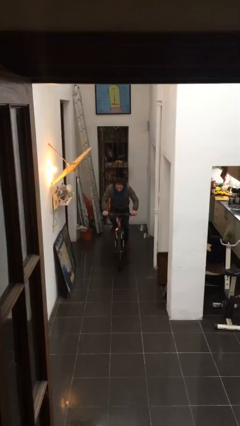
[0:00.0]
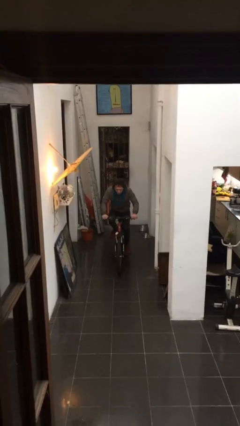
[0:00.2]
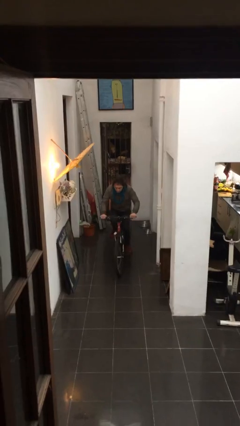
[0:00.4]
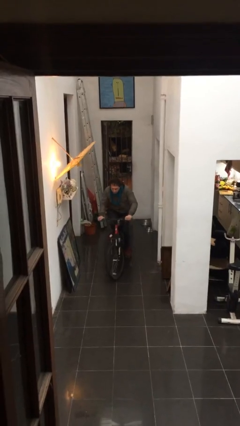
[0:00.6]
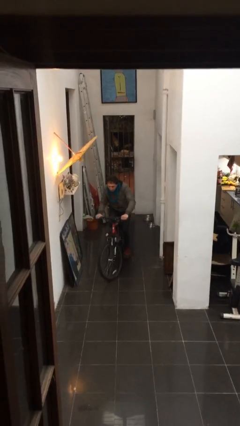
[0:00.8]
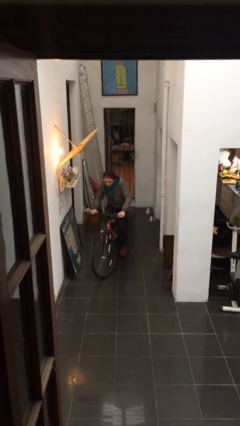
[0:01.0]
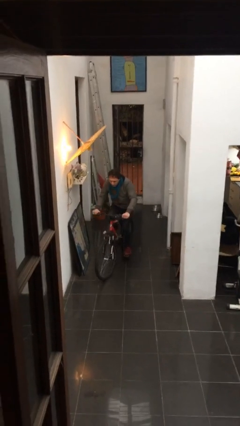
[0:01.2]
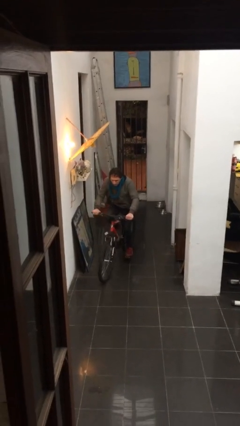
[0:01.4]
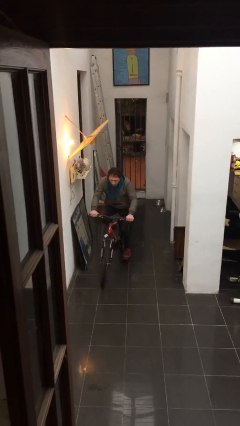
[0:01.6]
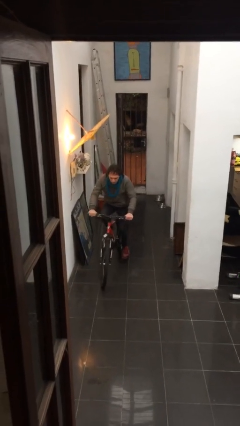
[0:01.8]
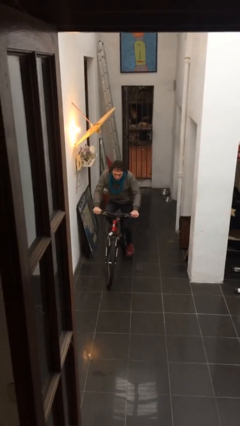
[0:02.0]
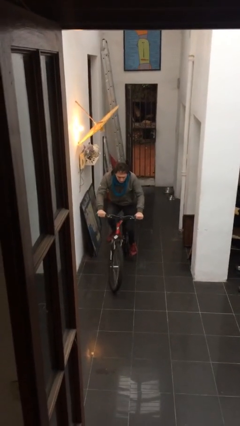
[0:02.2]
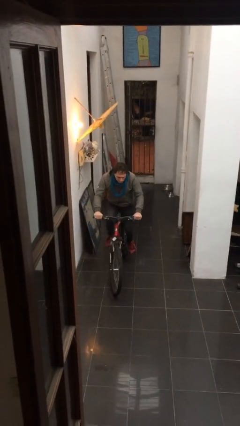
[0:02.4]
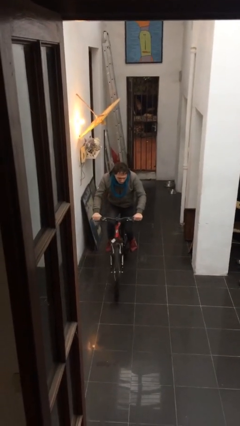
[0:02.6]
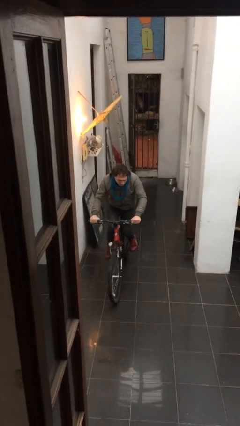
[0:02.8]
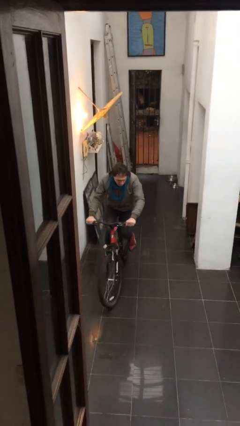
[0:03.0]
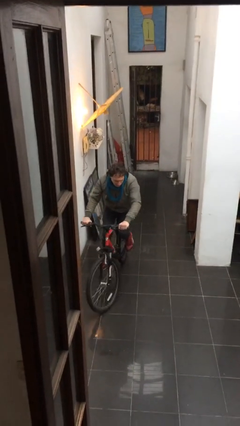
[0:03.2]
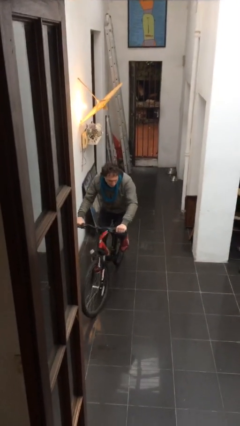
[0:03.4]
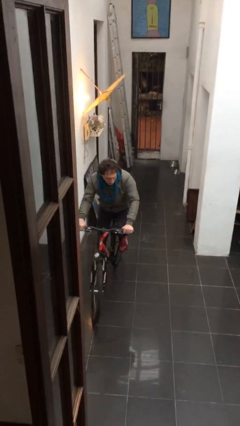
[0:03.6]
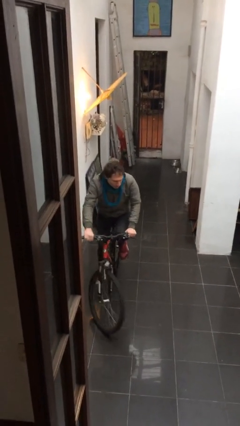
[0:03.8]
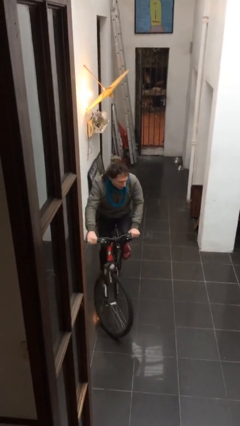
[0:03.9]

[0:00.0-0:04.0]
person rides bicycle

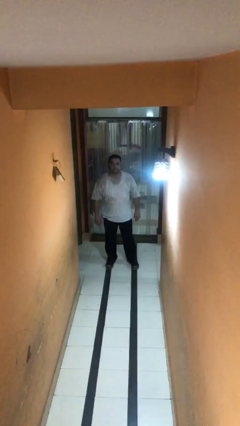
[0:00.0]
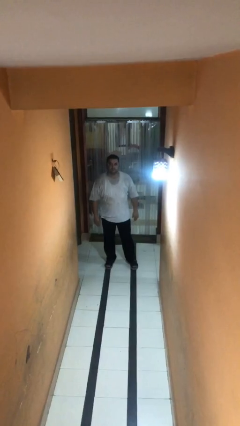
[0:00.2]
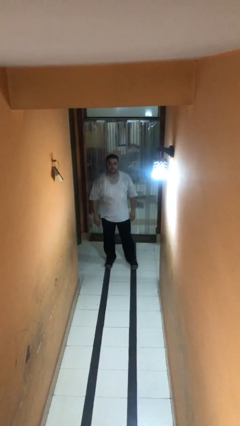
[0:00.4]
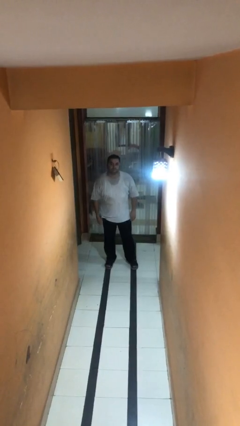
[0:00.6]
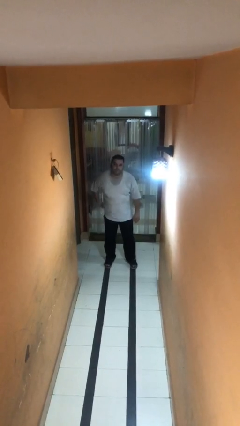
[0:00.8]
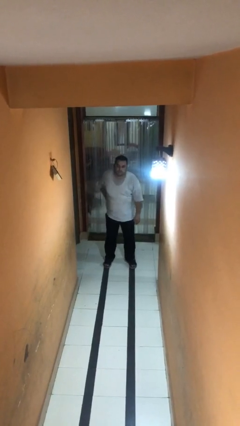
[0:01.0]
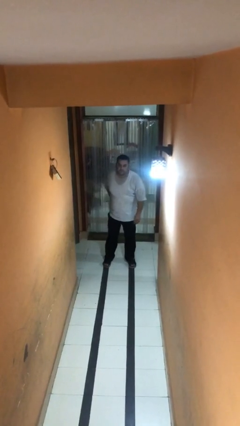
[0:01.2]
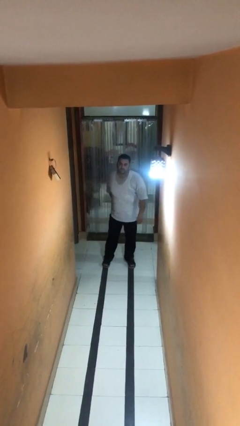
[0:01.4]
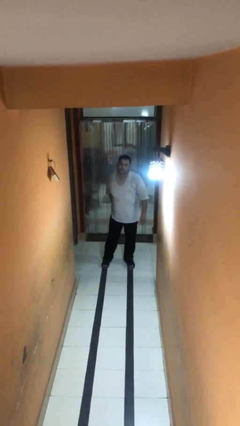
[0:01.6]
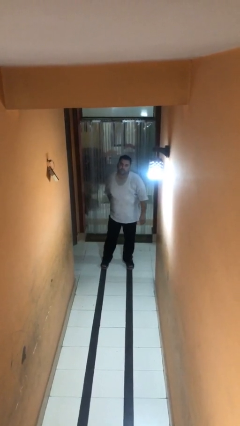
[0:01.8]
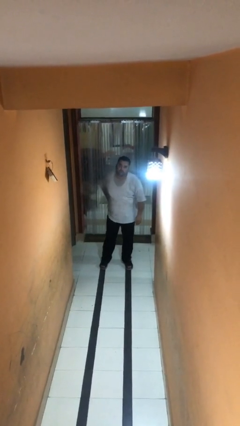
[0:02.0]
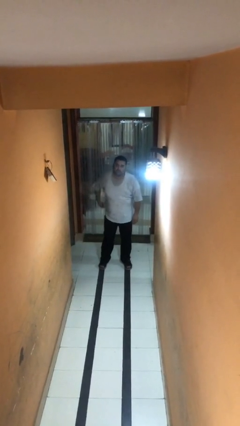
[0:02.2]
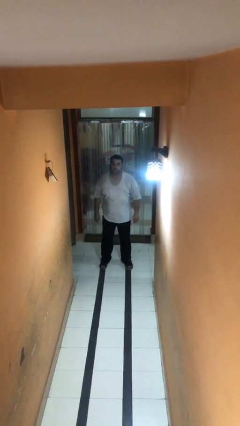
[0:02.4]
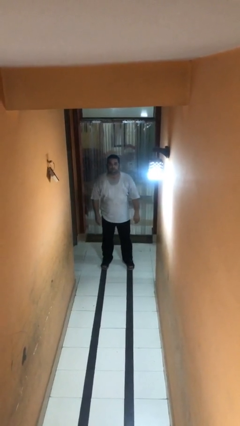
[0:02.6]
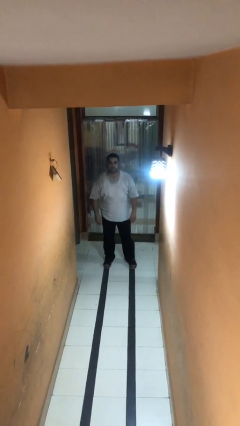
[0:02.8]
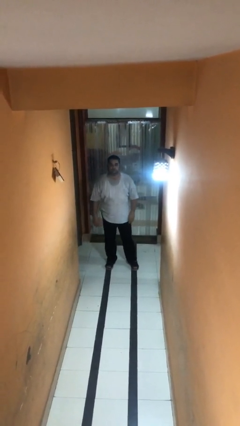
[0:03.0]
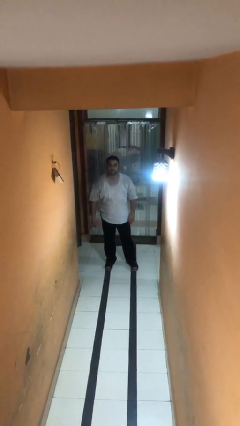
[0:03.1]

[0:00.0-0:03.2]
person puts hands in back pockets

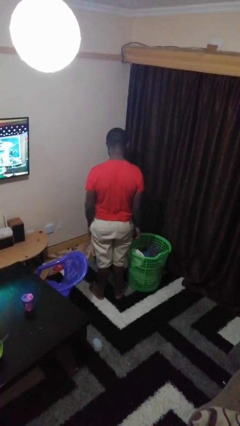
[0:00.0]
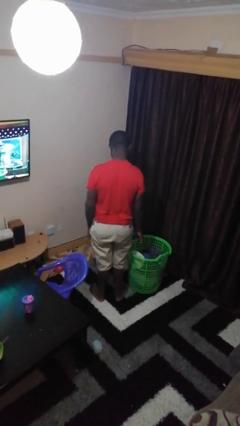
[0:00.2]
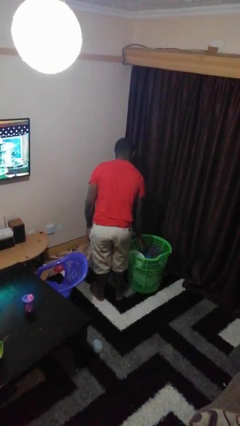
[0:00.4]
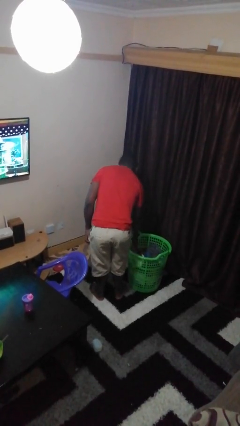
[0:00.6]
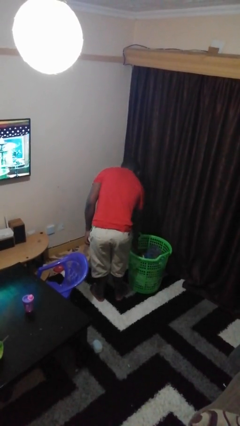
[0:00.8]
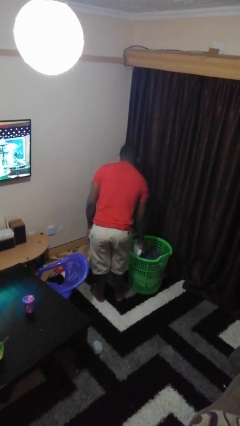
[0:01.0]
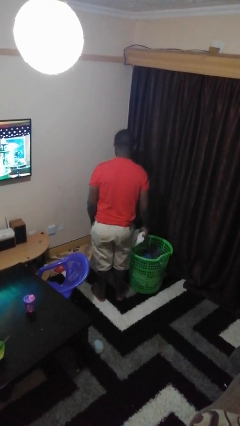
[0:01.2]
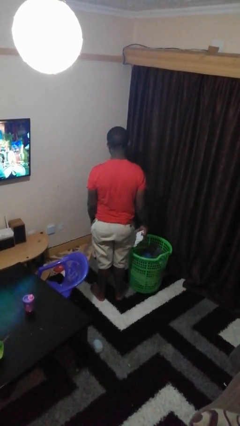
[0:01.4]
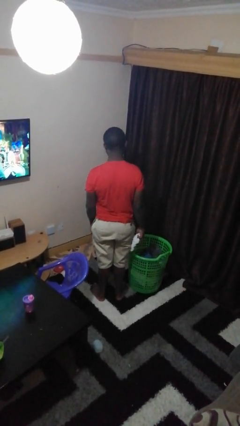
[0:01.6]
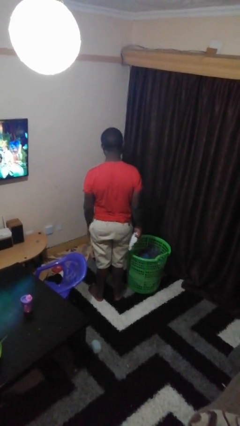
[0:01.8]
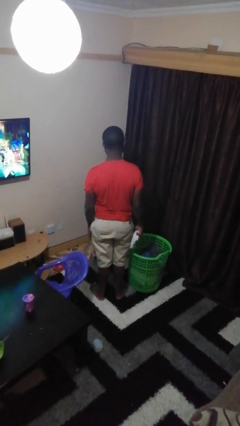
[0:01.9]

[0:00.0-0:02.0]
person takes object from basket

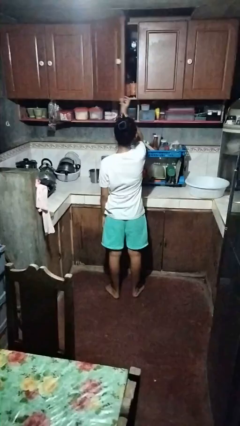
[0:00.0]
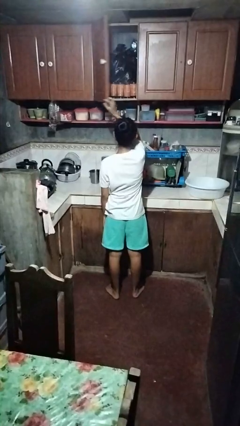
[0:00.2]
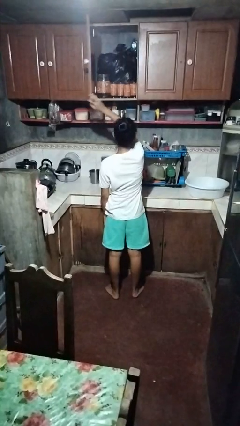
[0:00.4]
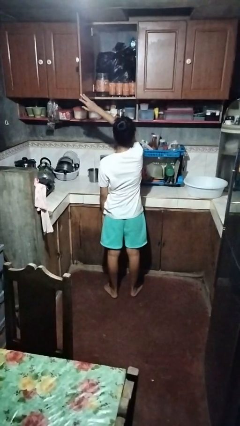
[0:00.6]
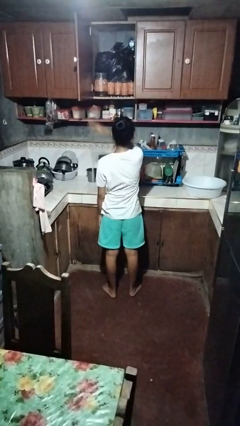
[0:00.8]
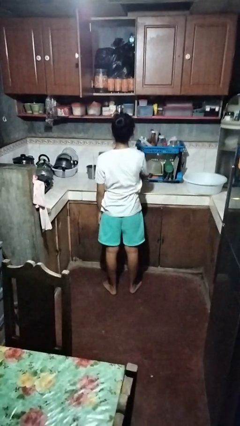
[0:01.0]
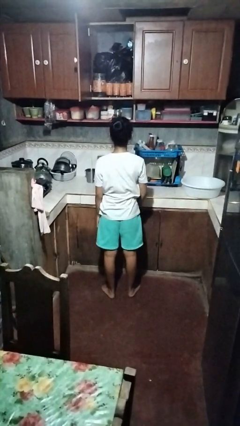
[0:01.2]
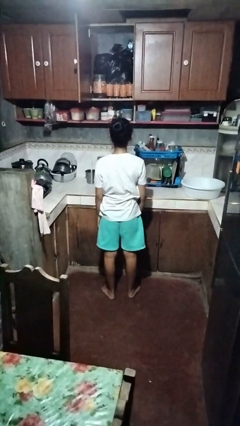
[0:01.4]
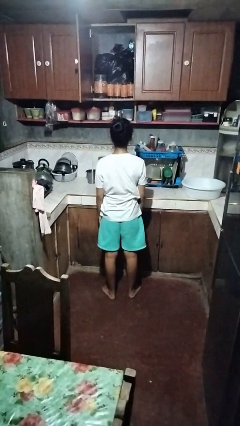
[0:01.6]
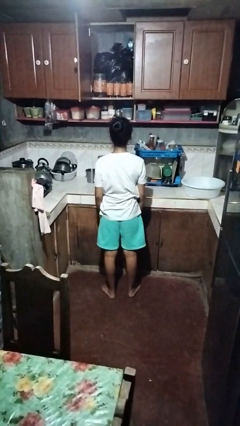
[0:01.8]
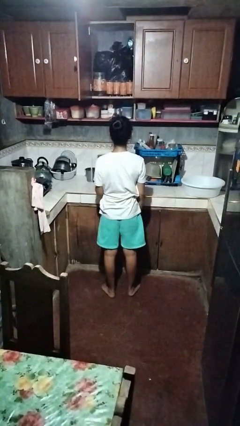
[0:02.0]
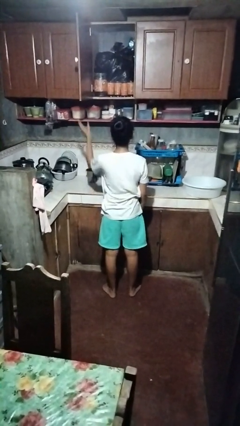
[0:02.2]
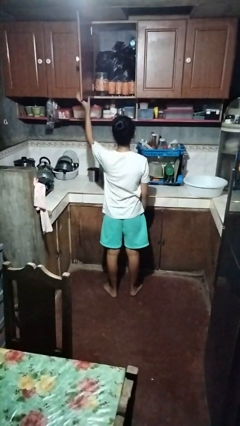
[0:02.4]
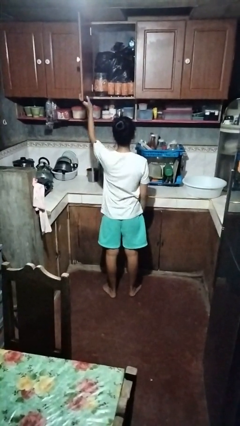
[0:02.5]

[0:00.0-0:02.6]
person opens cabinet

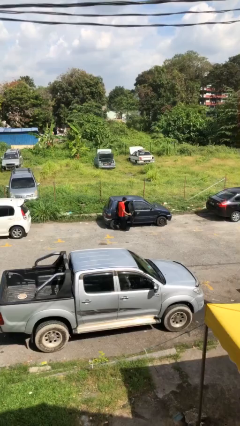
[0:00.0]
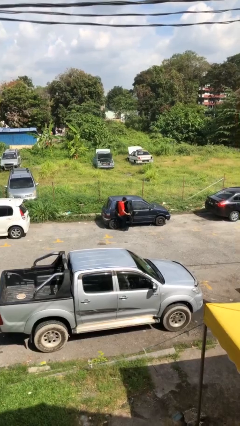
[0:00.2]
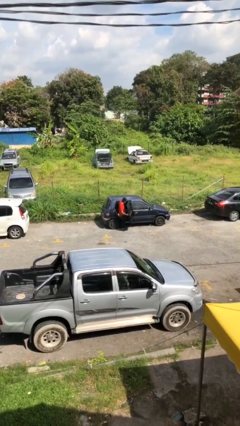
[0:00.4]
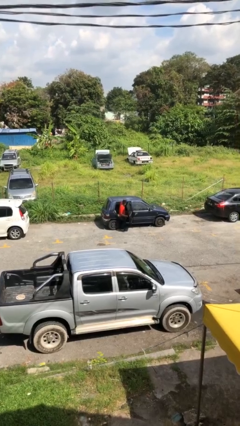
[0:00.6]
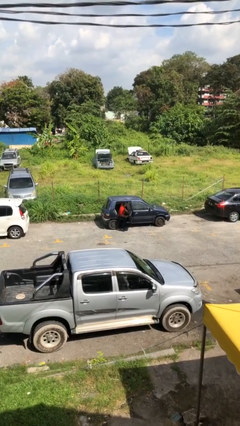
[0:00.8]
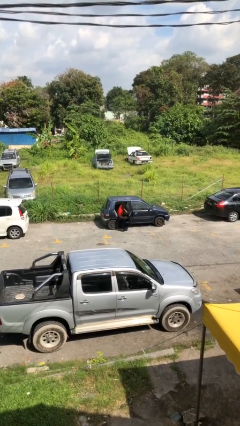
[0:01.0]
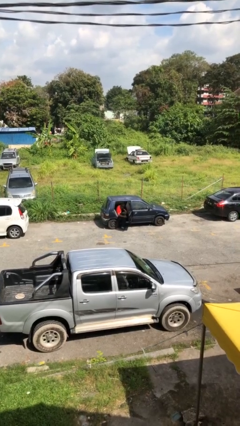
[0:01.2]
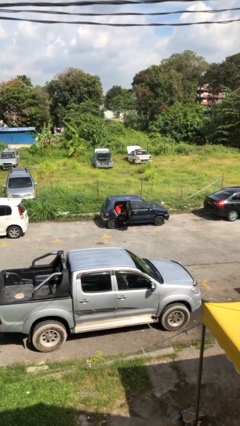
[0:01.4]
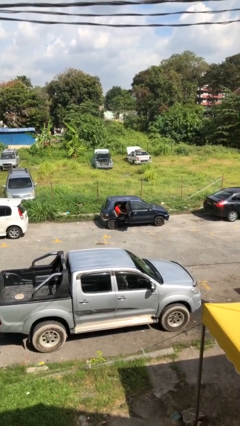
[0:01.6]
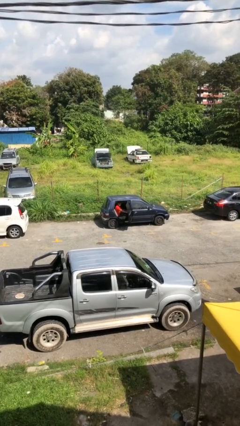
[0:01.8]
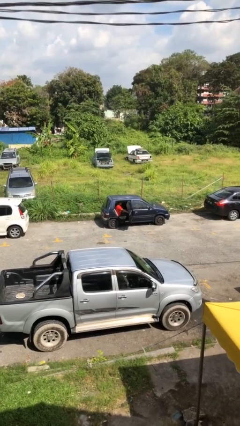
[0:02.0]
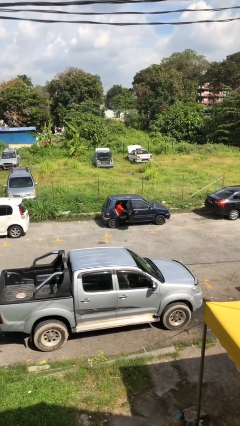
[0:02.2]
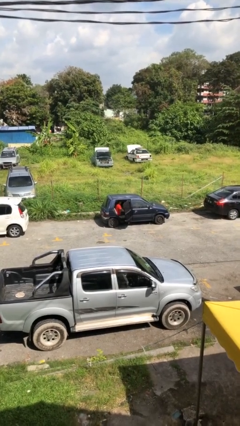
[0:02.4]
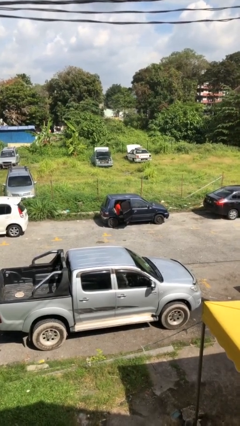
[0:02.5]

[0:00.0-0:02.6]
person enters car

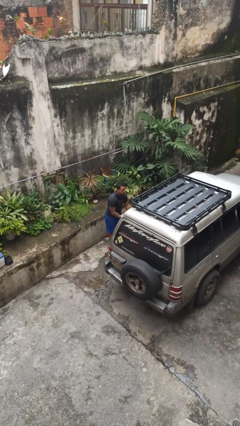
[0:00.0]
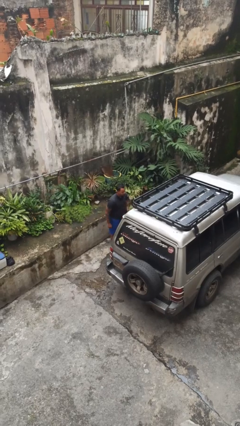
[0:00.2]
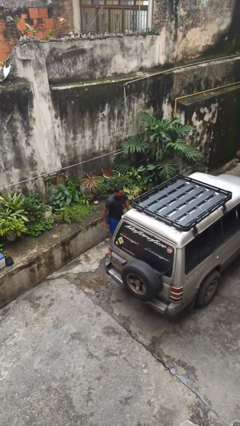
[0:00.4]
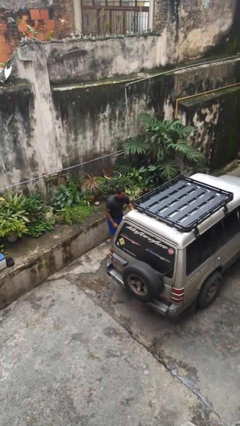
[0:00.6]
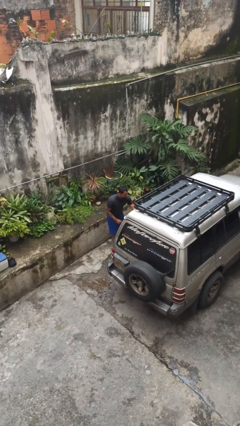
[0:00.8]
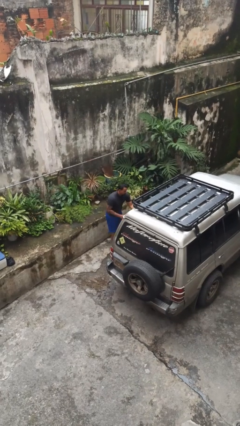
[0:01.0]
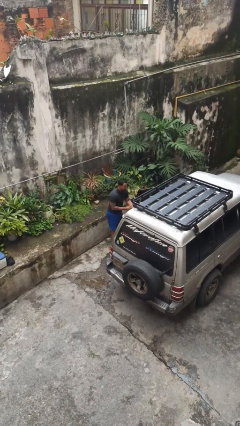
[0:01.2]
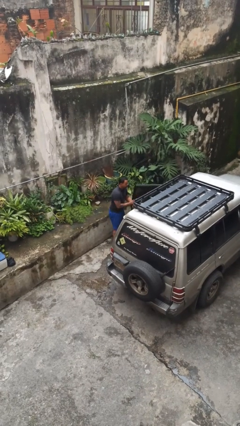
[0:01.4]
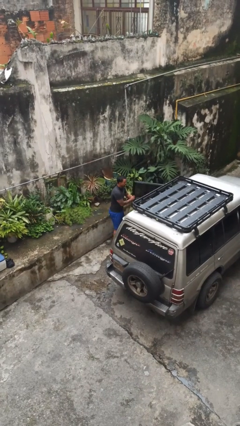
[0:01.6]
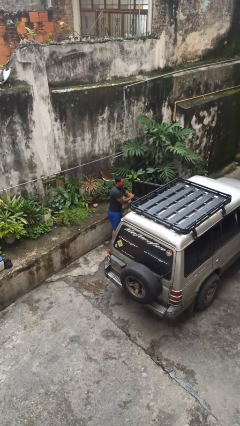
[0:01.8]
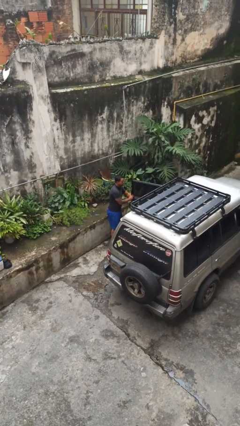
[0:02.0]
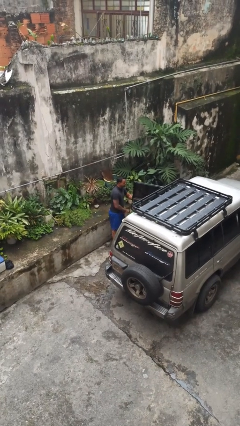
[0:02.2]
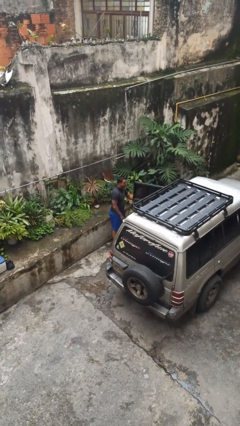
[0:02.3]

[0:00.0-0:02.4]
person opens car door

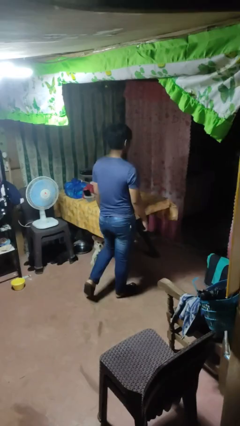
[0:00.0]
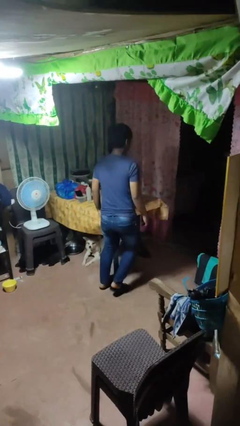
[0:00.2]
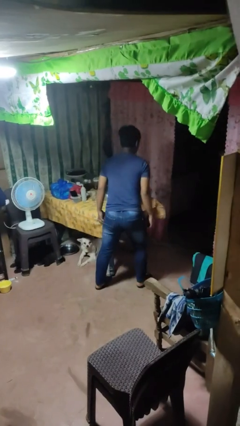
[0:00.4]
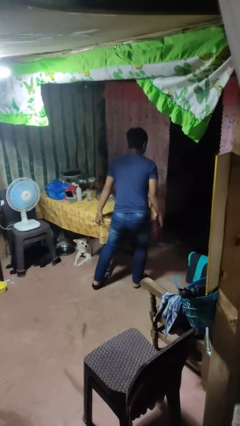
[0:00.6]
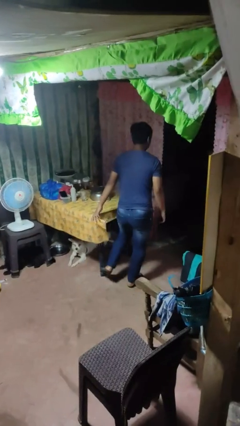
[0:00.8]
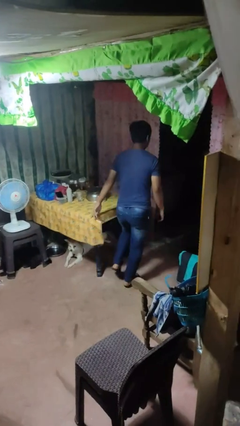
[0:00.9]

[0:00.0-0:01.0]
person bumps into table
